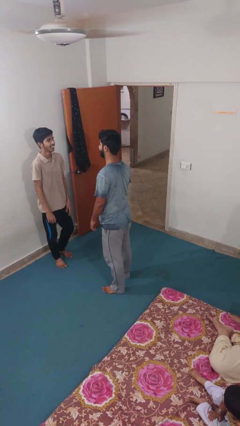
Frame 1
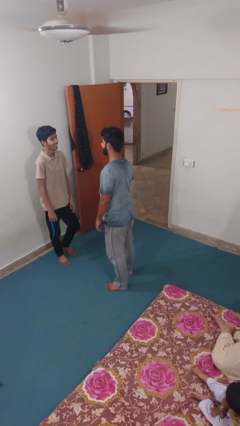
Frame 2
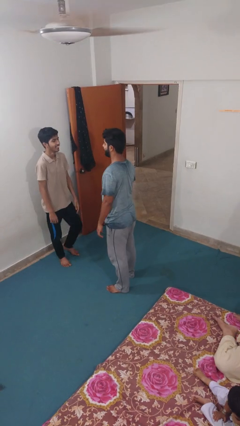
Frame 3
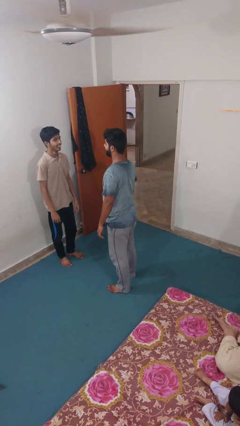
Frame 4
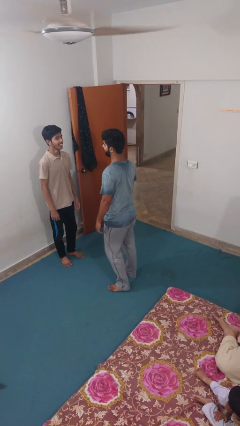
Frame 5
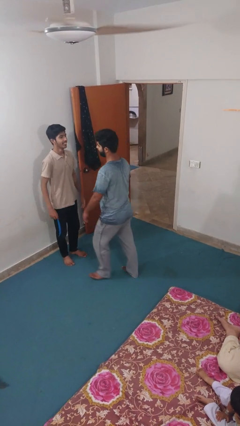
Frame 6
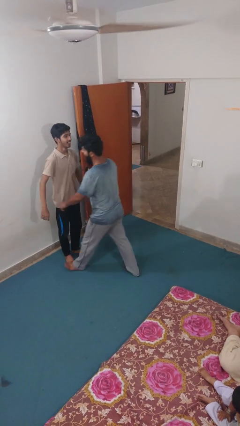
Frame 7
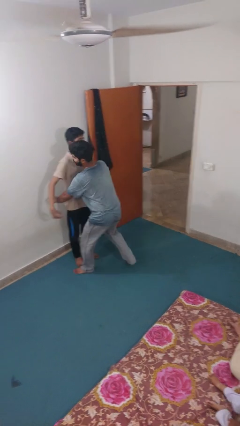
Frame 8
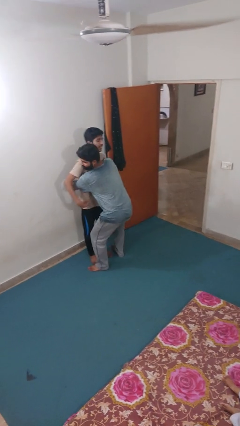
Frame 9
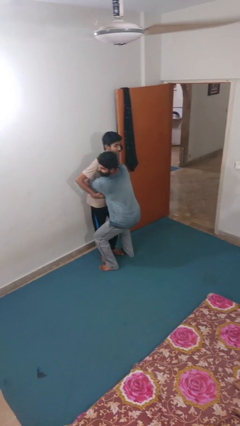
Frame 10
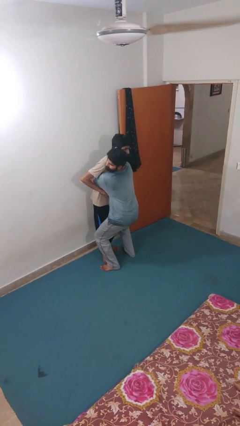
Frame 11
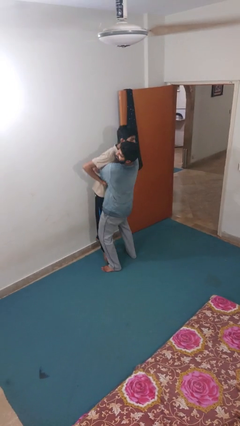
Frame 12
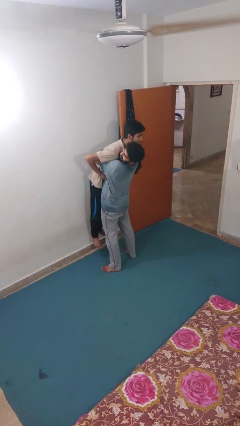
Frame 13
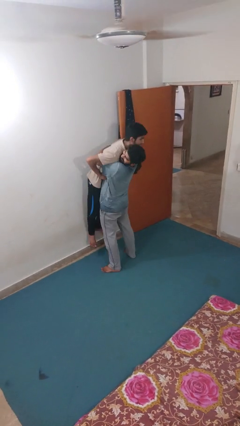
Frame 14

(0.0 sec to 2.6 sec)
person picks up person

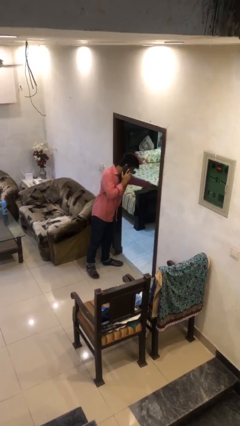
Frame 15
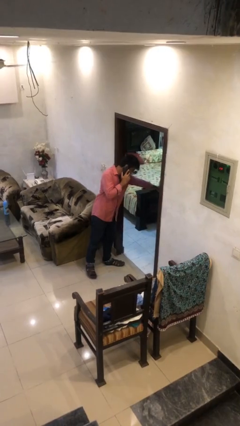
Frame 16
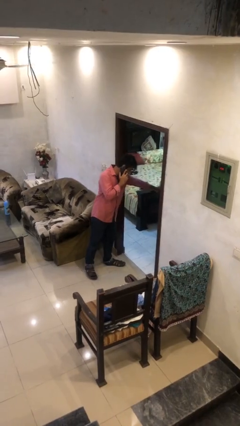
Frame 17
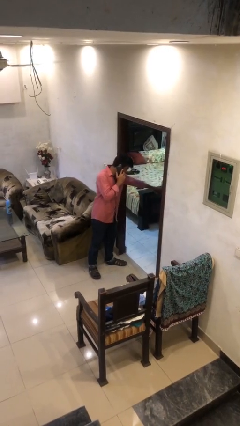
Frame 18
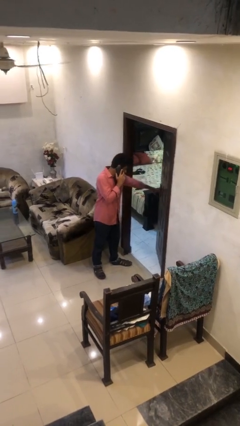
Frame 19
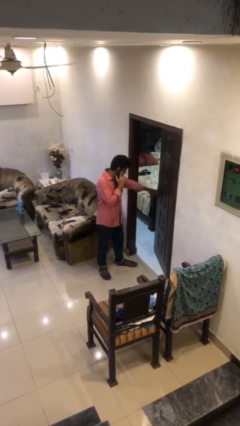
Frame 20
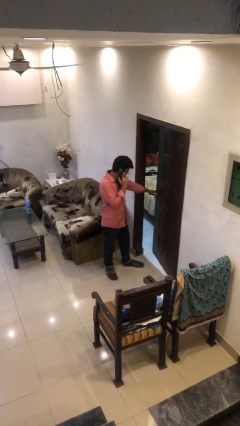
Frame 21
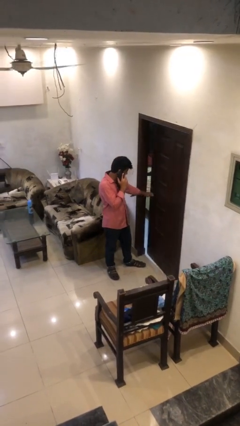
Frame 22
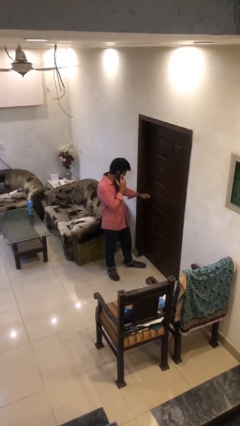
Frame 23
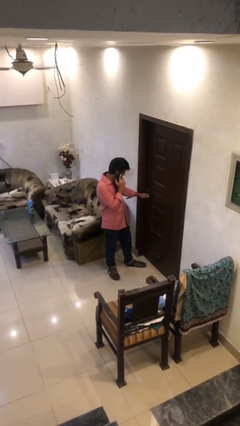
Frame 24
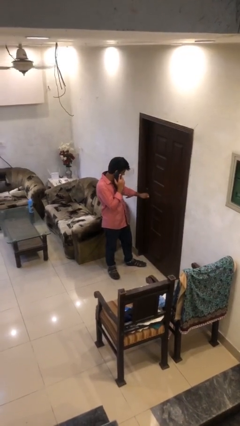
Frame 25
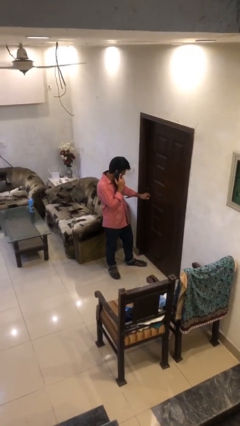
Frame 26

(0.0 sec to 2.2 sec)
person closes facility door

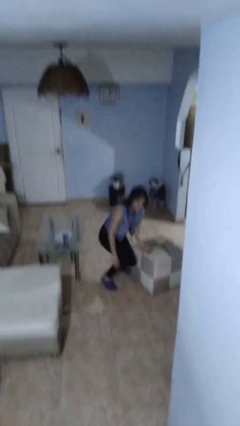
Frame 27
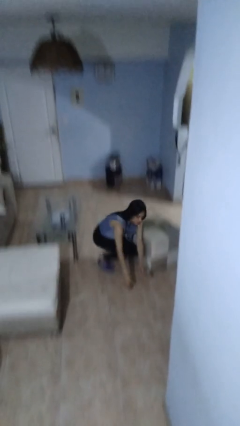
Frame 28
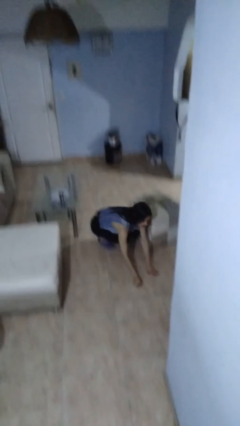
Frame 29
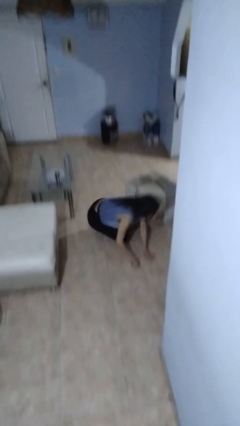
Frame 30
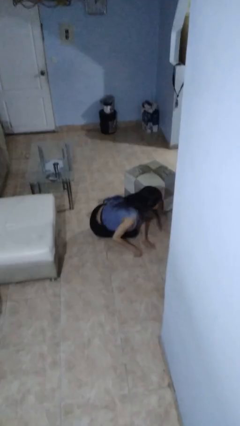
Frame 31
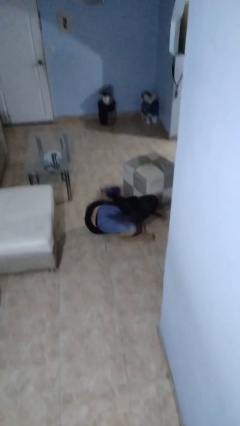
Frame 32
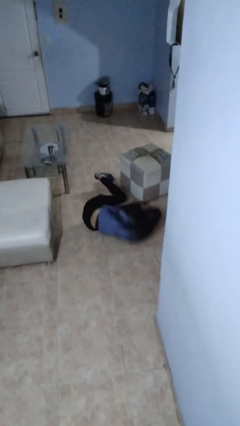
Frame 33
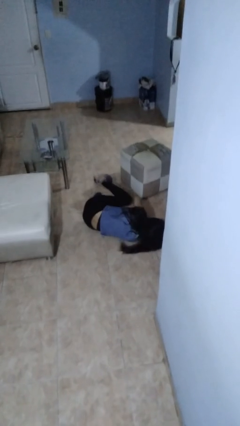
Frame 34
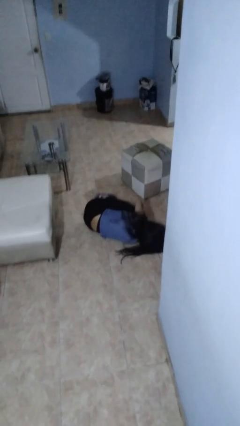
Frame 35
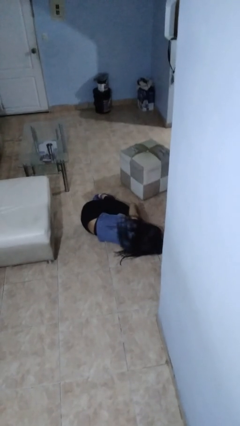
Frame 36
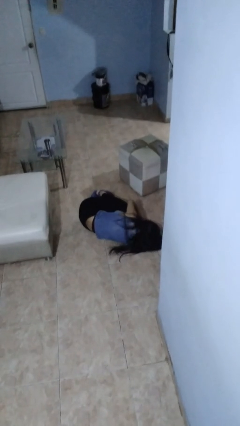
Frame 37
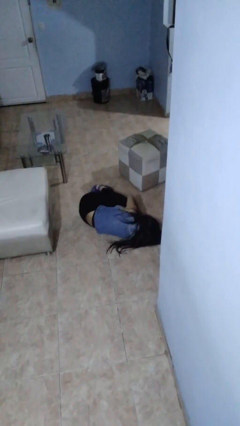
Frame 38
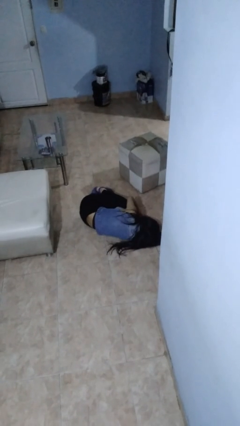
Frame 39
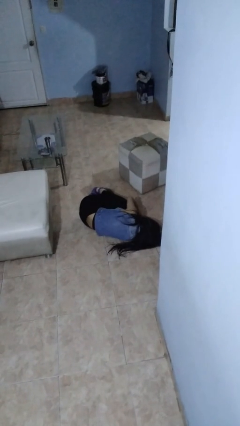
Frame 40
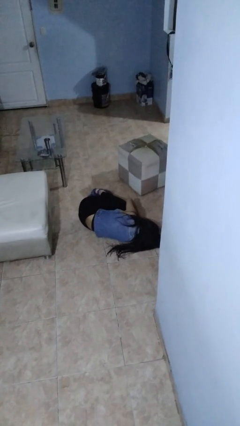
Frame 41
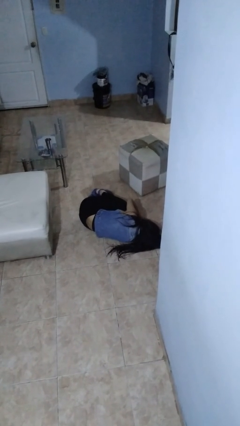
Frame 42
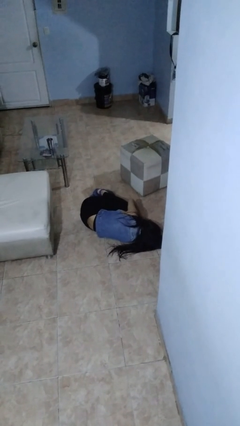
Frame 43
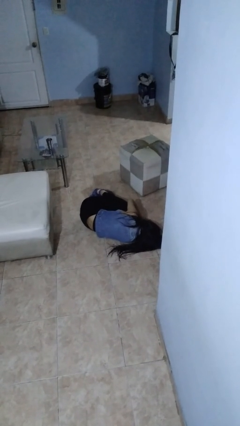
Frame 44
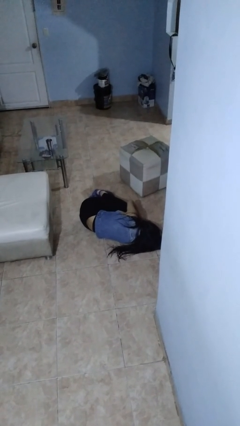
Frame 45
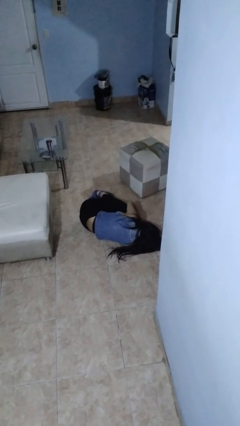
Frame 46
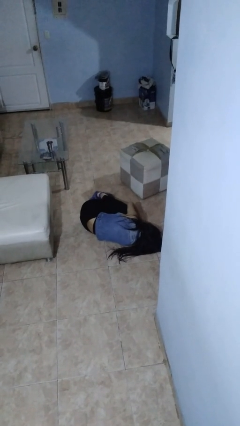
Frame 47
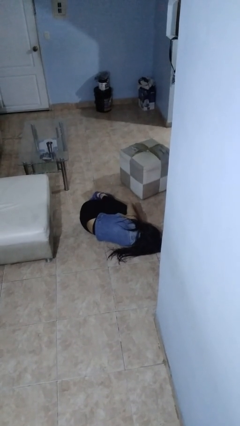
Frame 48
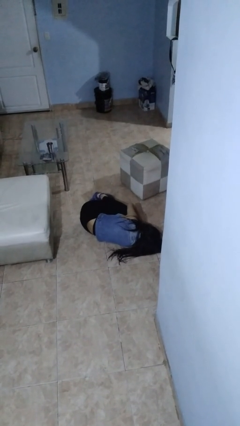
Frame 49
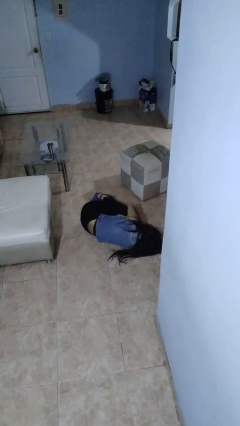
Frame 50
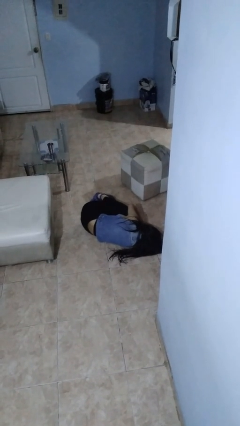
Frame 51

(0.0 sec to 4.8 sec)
person lies down on floor

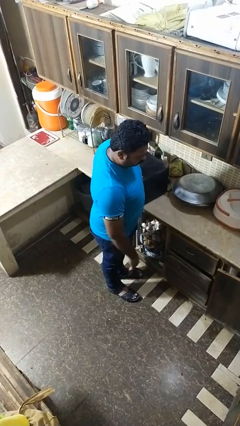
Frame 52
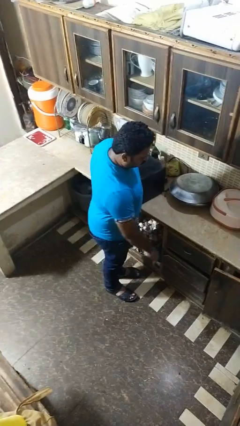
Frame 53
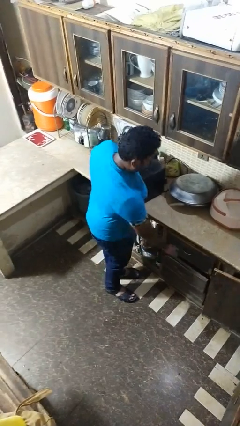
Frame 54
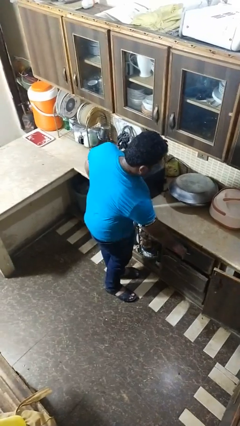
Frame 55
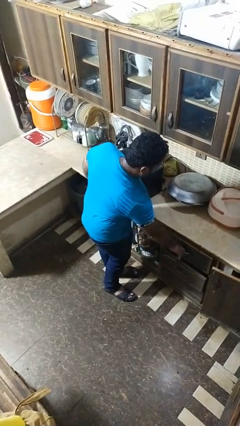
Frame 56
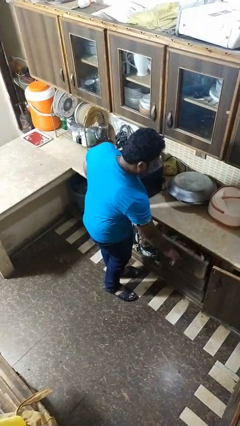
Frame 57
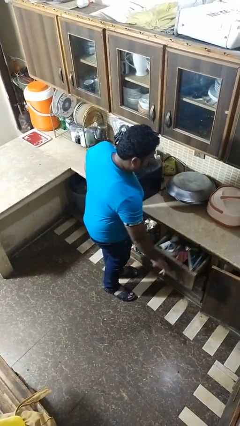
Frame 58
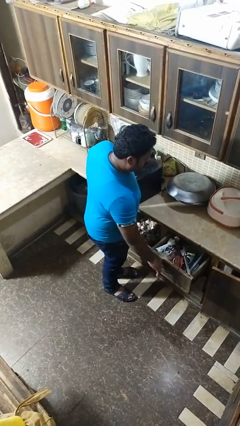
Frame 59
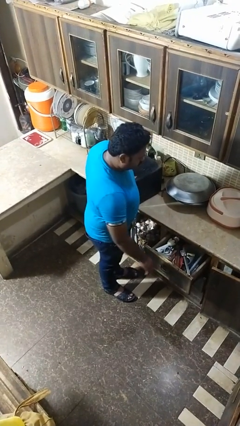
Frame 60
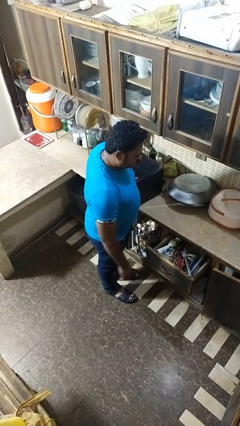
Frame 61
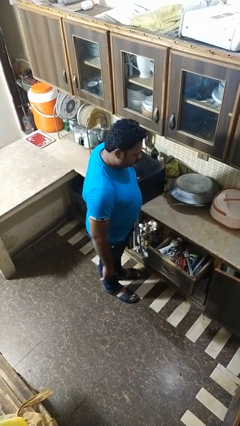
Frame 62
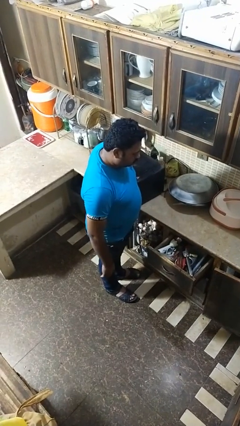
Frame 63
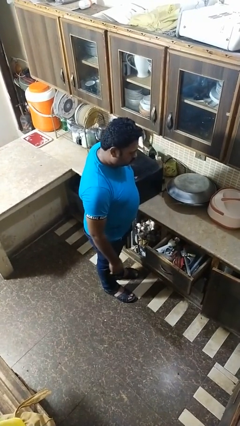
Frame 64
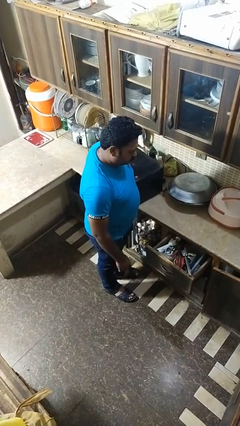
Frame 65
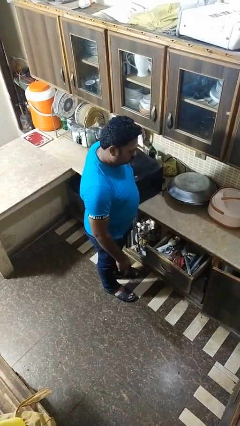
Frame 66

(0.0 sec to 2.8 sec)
person opens dresser drawer

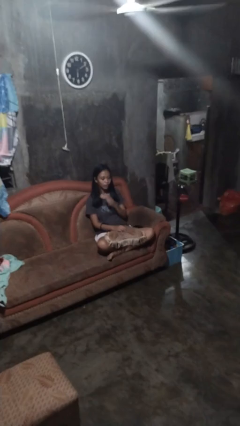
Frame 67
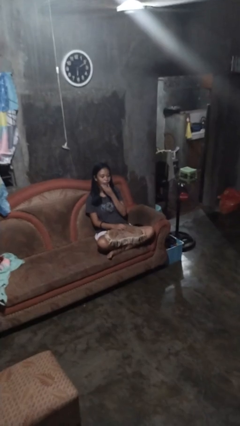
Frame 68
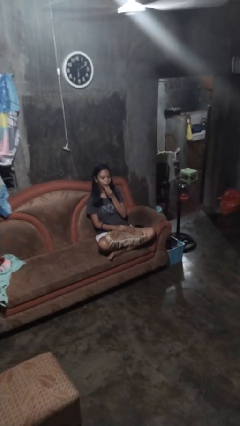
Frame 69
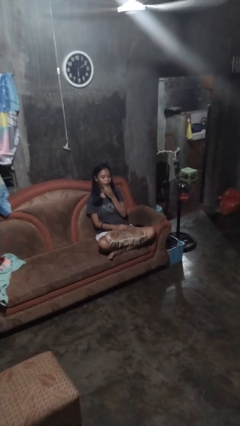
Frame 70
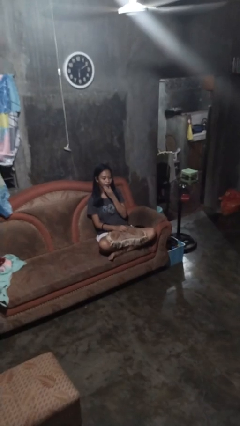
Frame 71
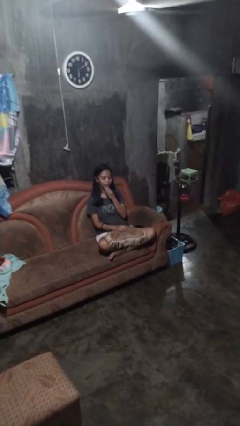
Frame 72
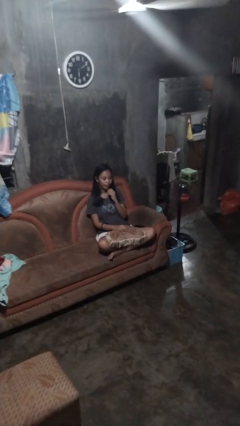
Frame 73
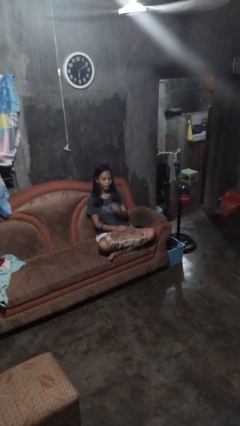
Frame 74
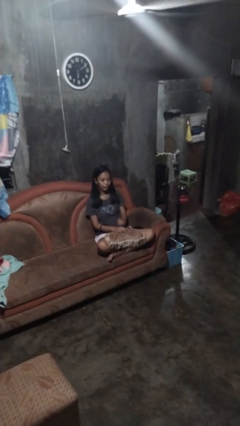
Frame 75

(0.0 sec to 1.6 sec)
person strokes chin

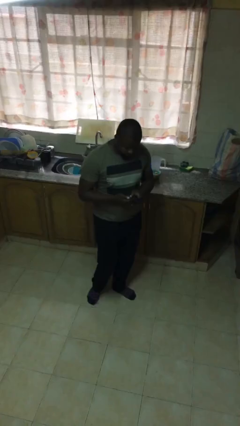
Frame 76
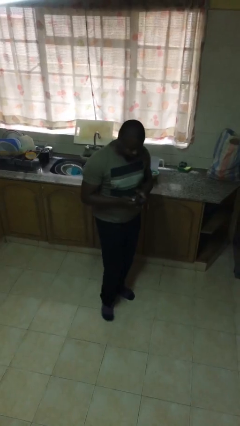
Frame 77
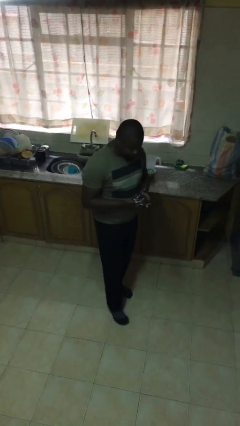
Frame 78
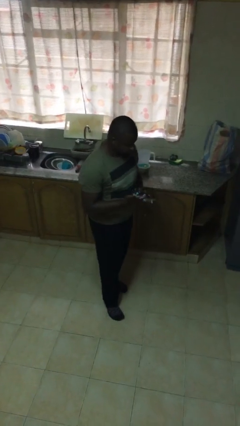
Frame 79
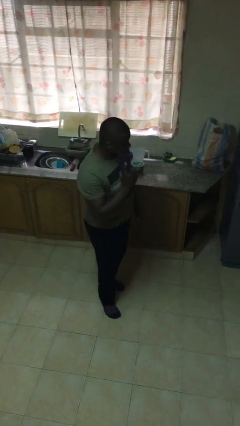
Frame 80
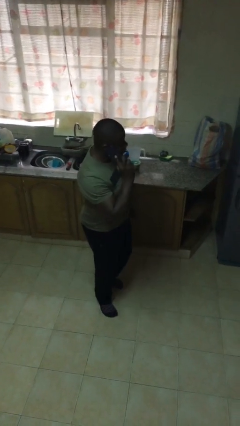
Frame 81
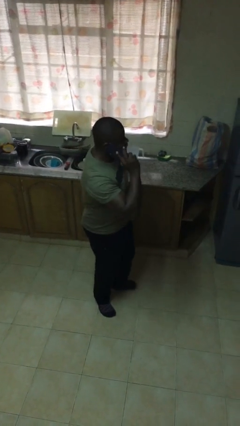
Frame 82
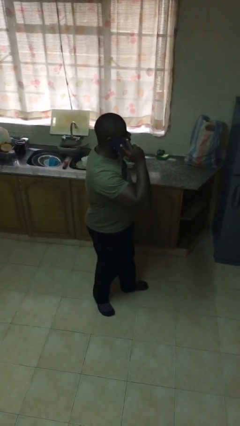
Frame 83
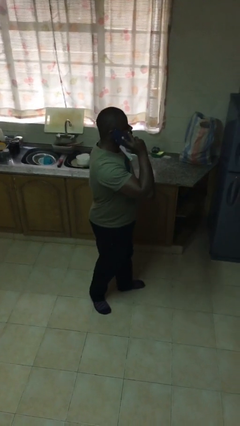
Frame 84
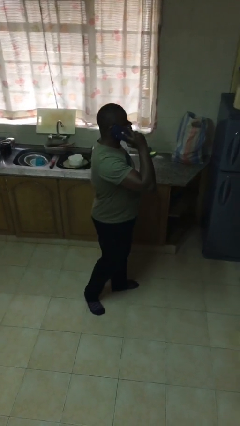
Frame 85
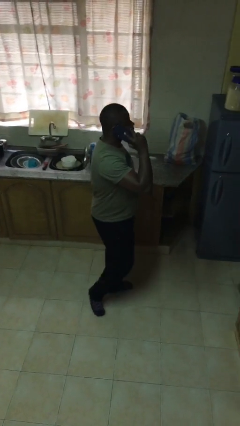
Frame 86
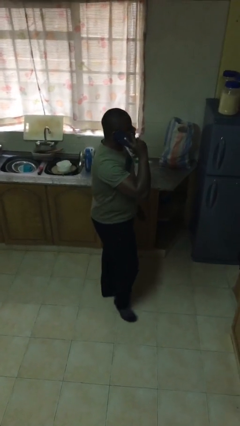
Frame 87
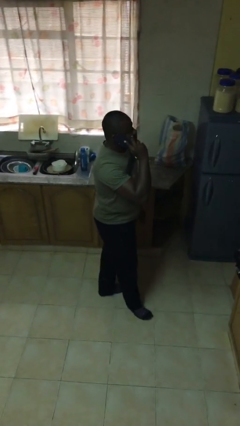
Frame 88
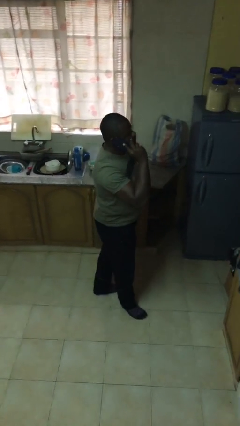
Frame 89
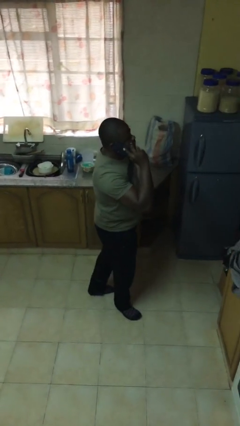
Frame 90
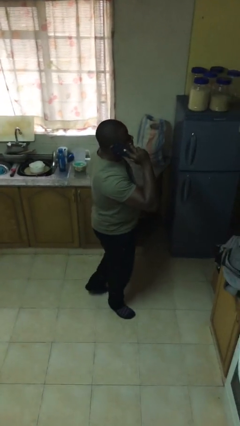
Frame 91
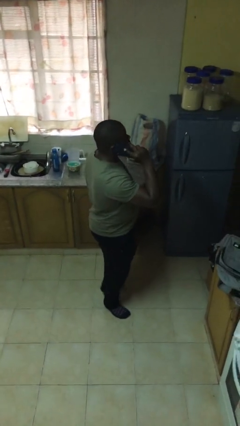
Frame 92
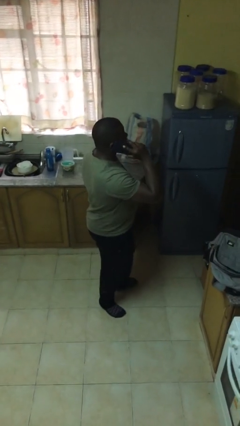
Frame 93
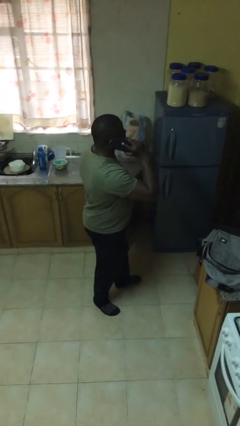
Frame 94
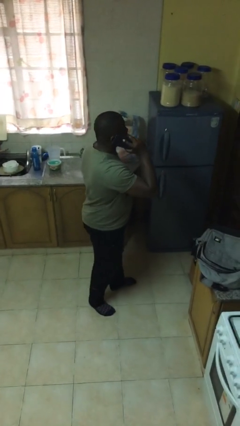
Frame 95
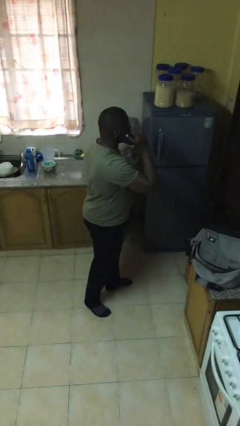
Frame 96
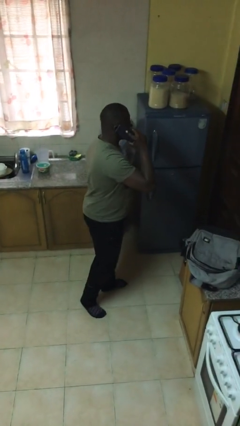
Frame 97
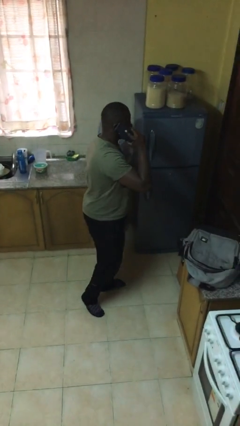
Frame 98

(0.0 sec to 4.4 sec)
person talks on phone
